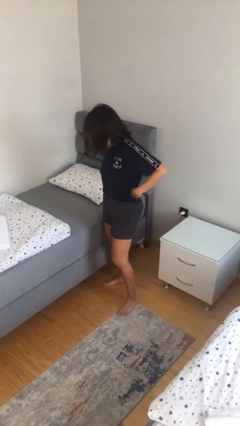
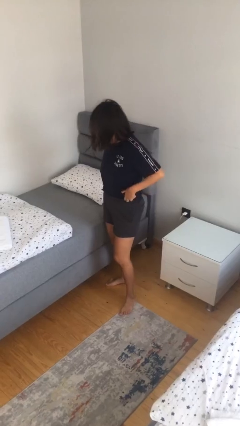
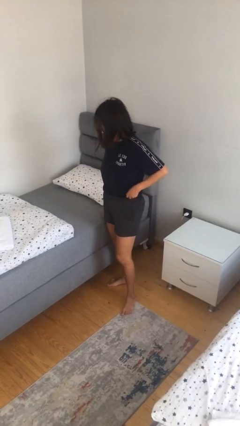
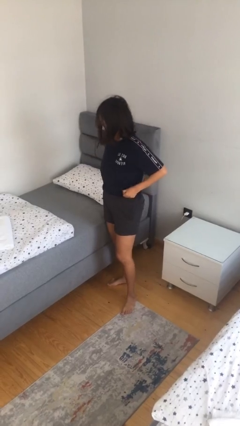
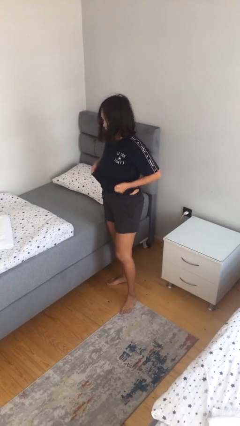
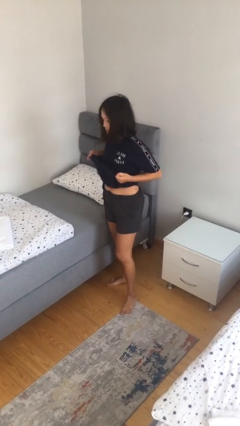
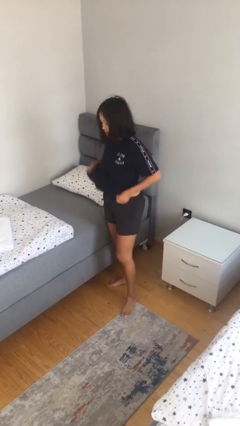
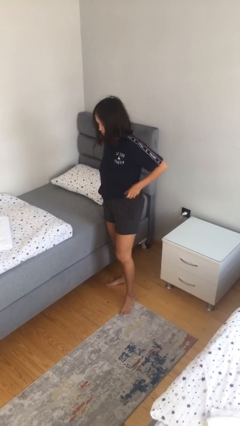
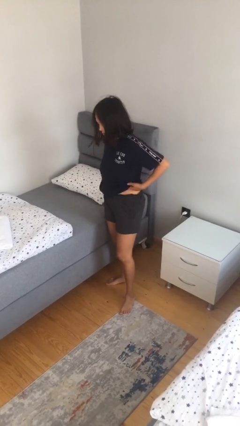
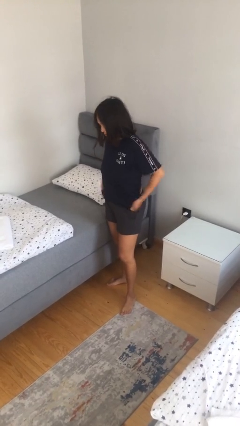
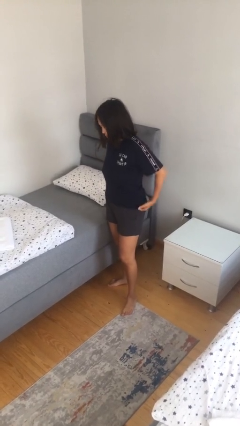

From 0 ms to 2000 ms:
person untucks shirt

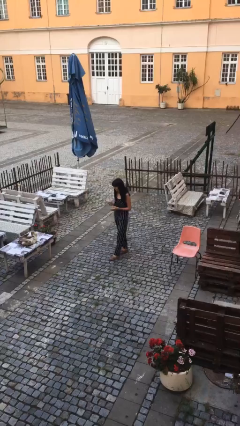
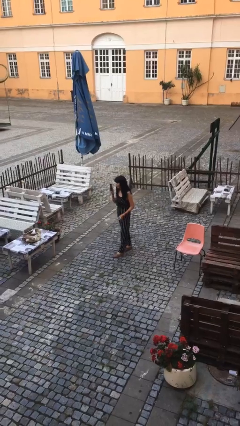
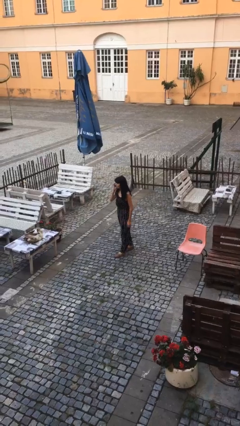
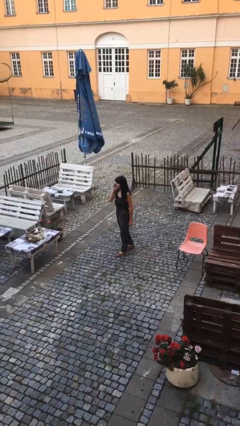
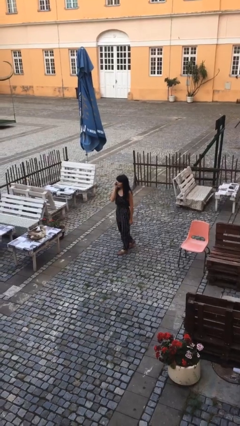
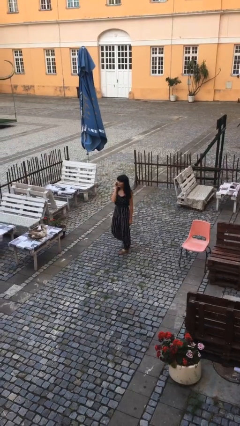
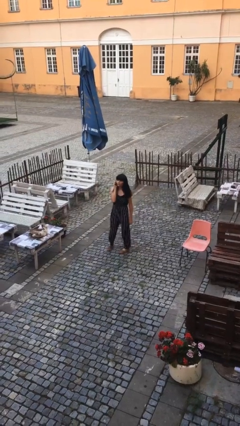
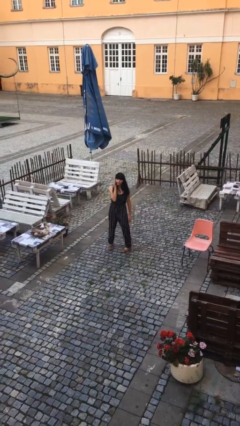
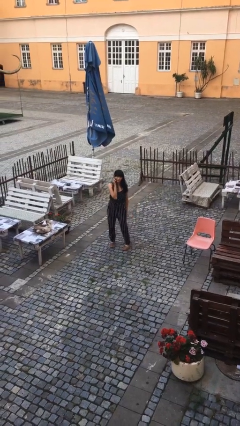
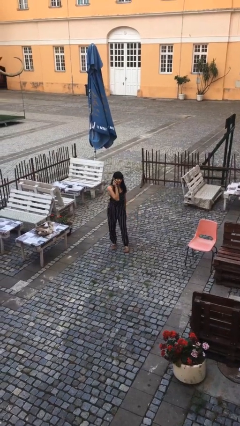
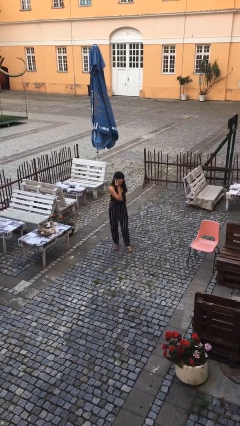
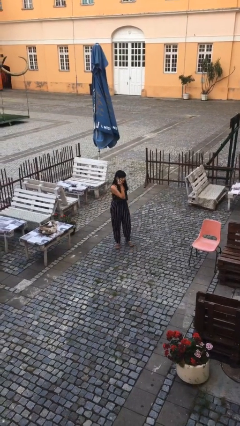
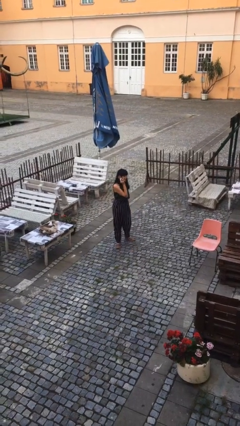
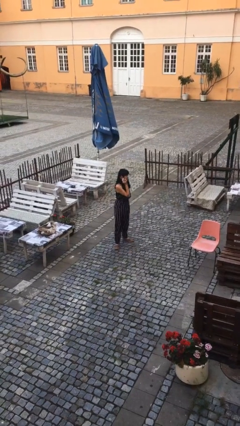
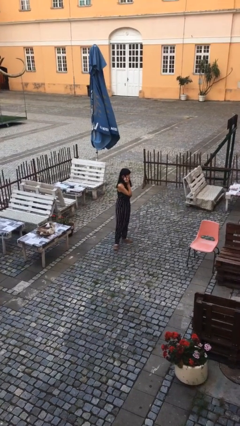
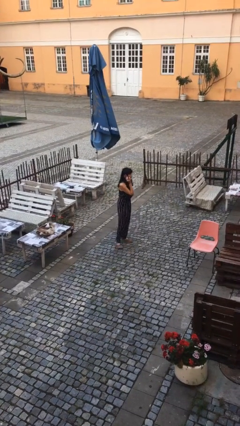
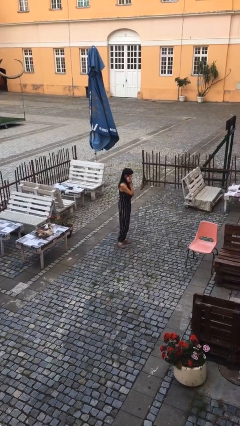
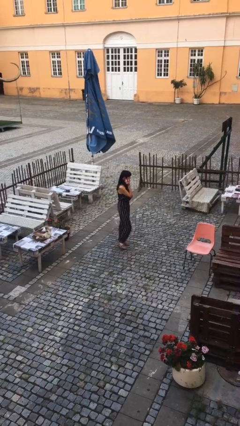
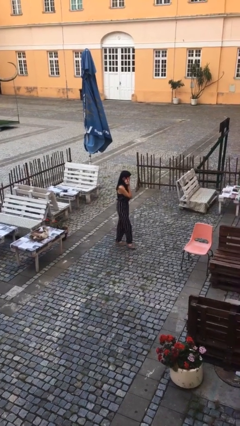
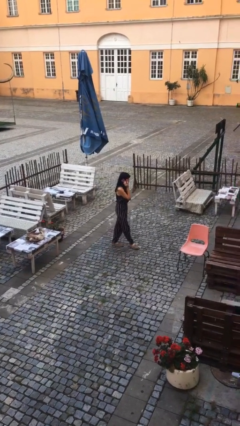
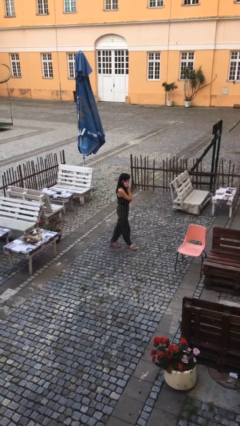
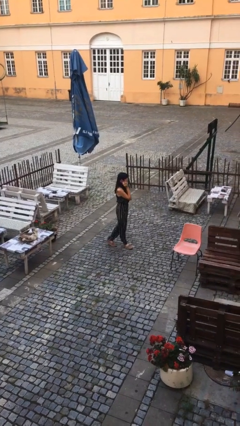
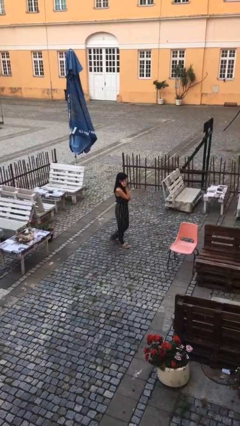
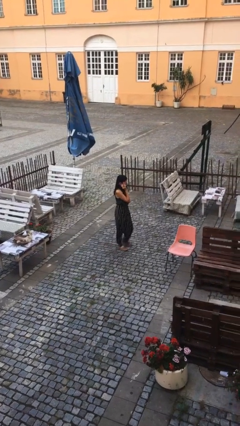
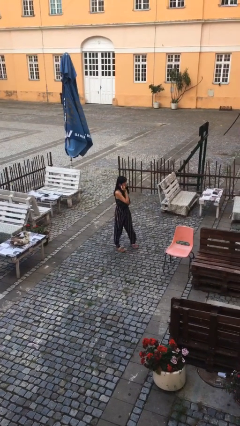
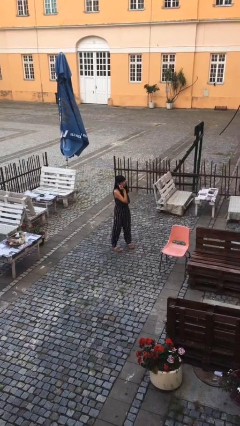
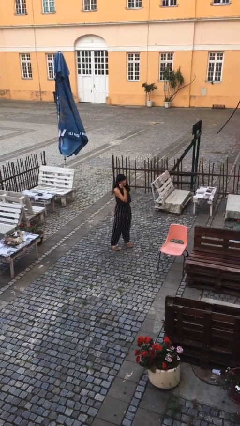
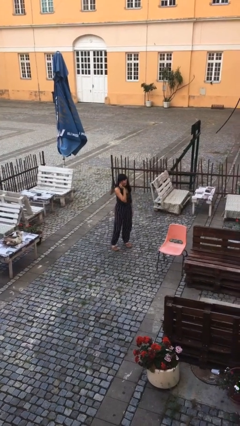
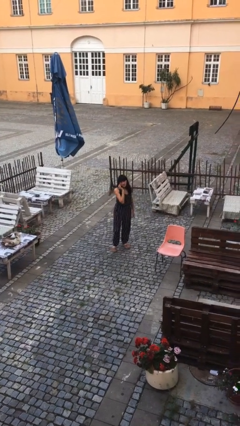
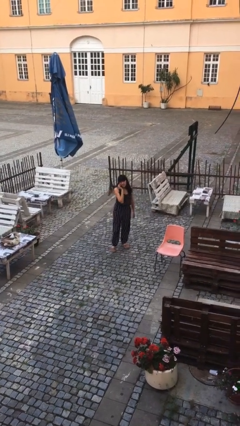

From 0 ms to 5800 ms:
person talks on phone

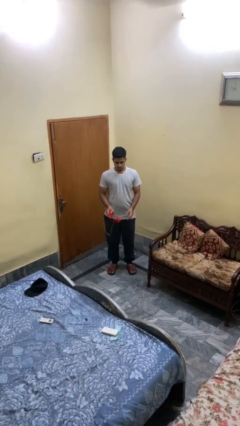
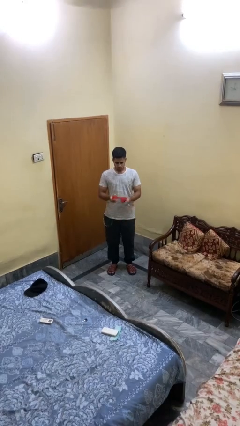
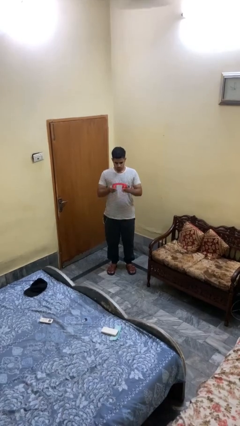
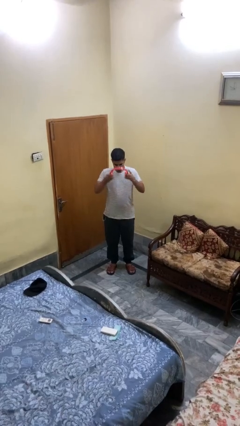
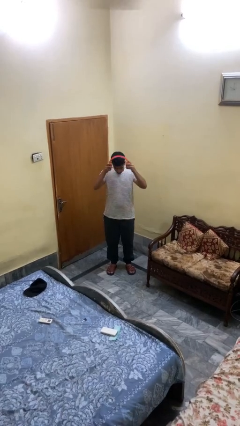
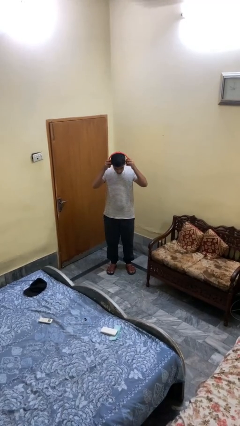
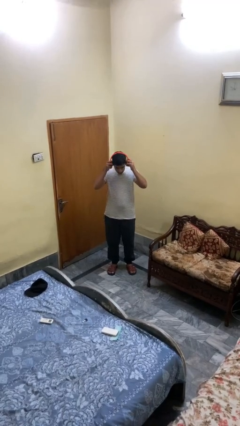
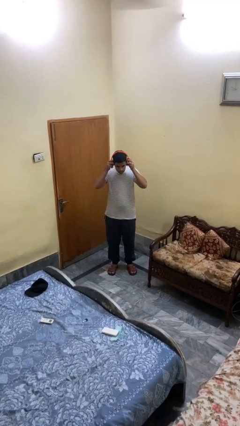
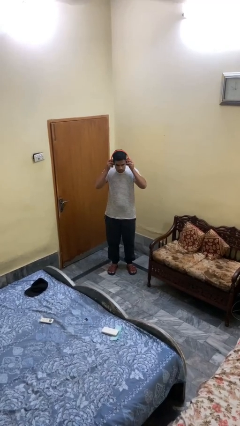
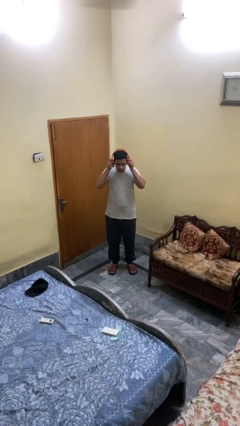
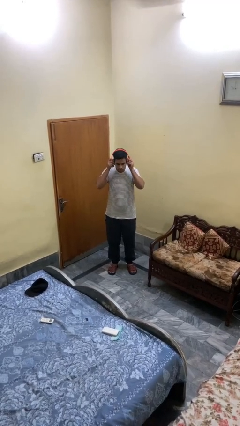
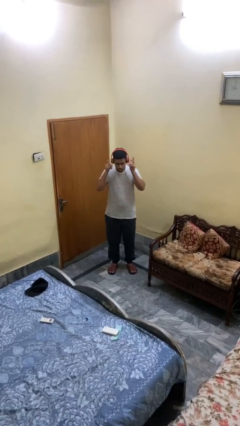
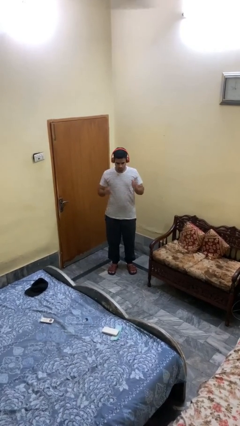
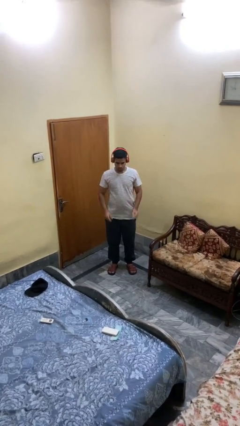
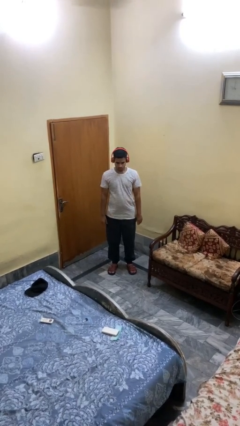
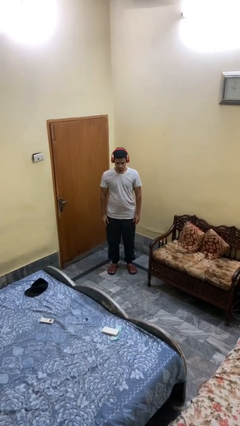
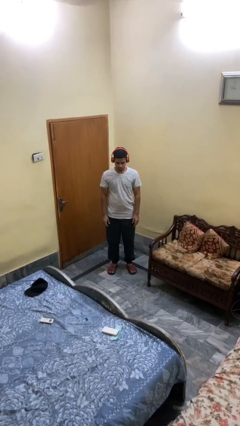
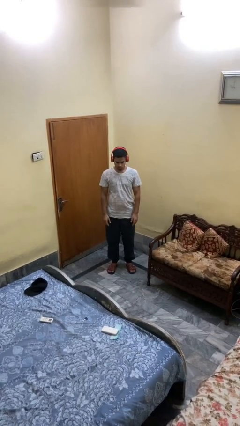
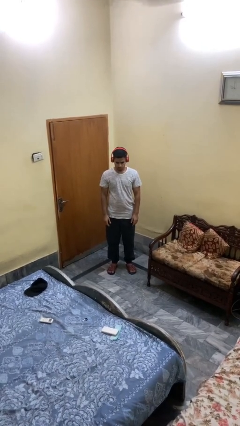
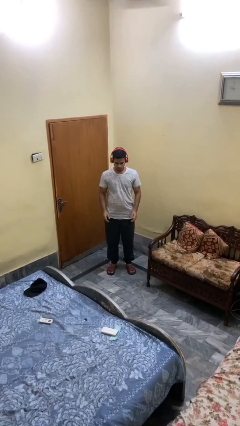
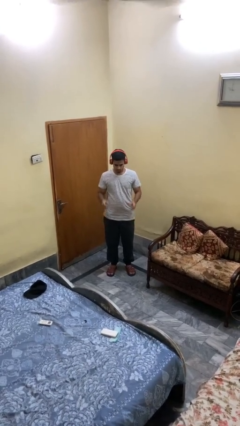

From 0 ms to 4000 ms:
person puts on headphones

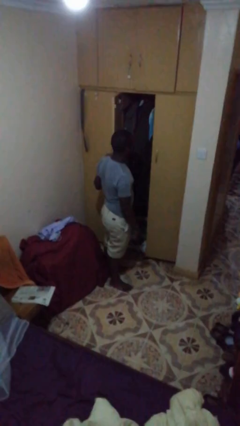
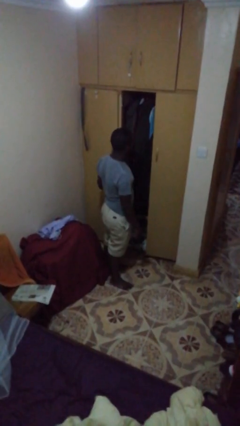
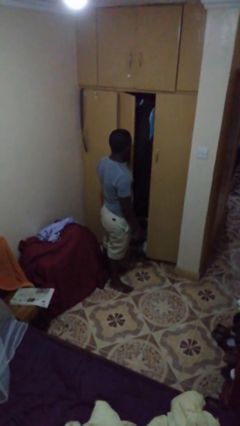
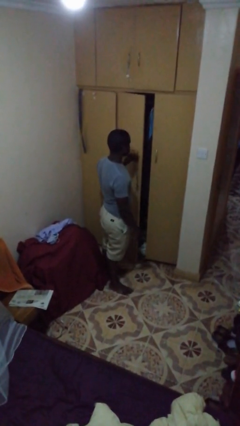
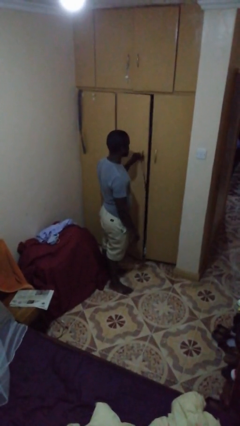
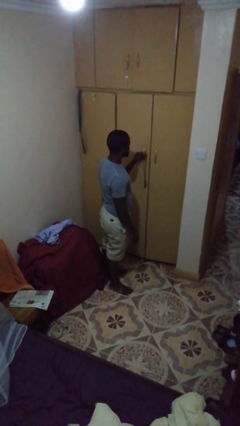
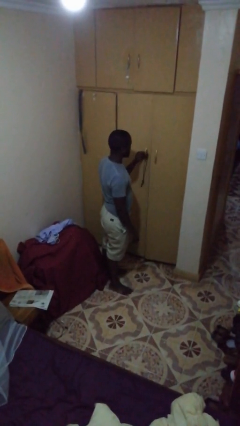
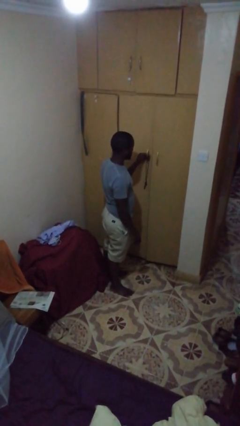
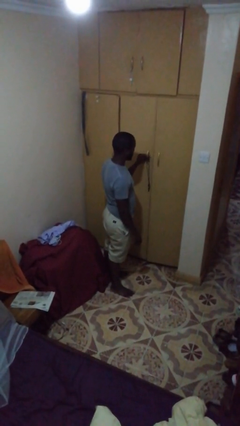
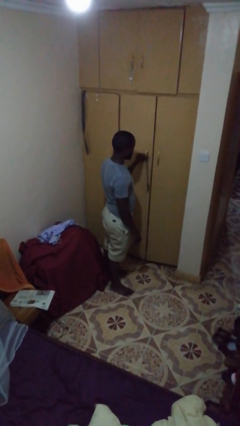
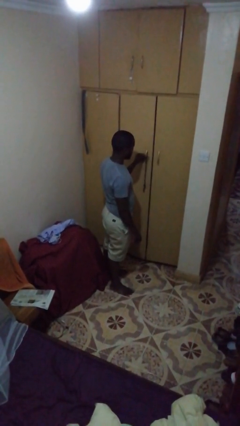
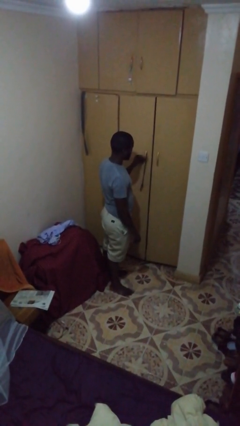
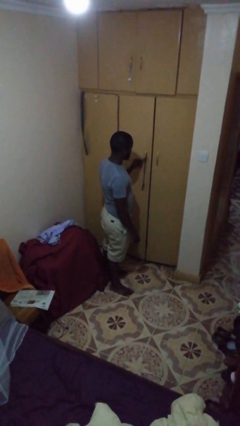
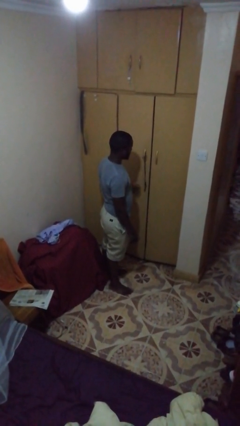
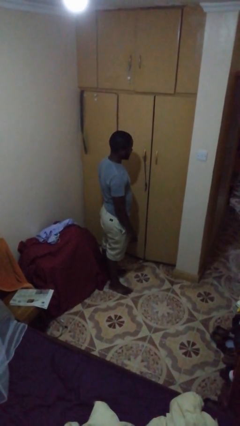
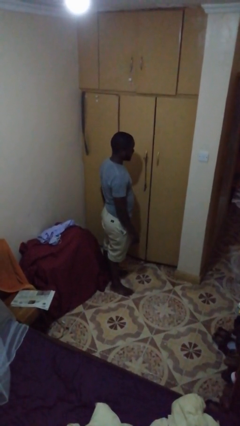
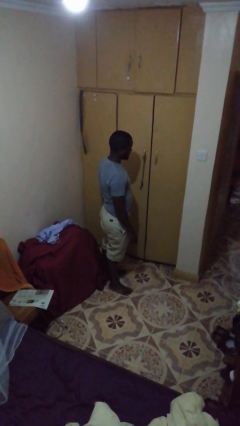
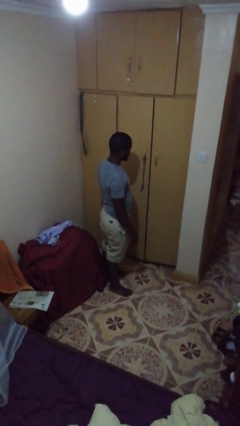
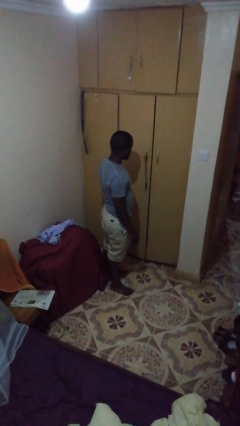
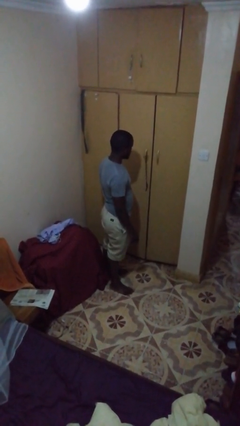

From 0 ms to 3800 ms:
person closes closet door

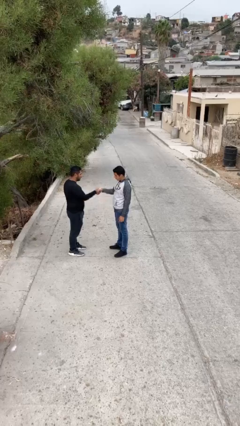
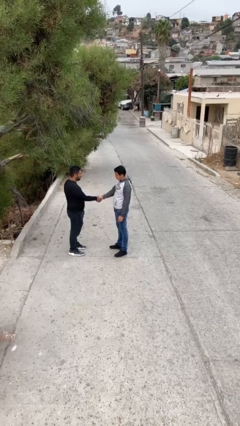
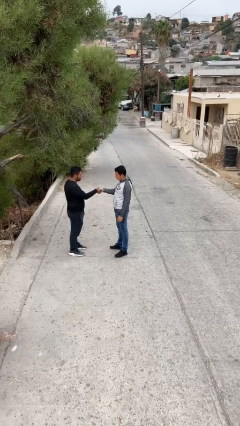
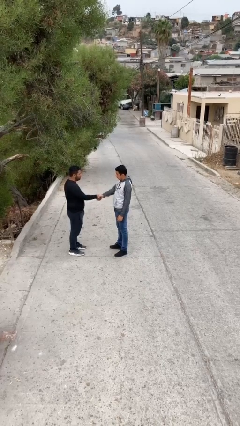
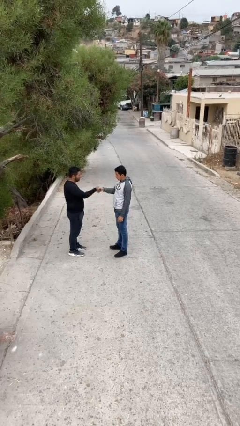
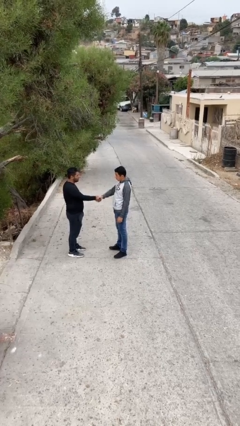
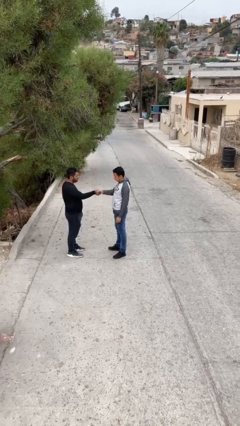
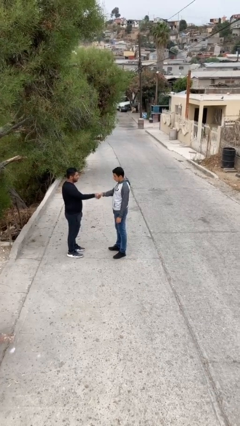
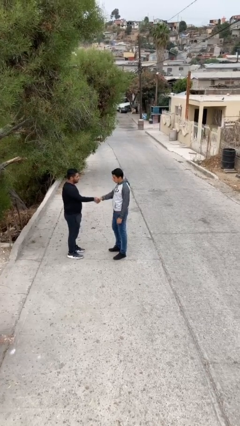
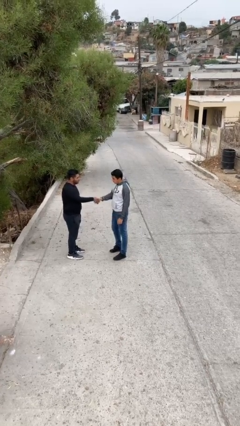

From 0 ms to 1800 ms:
person shakes hand
